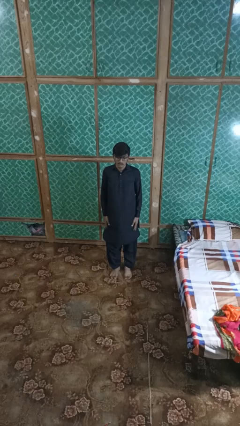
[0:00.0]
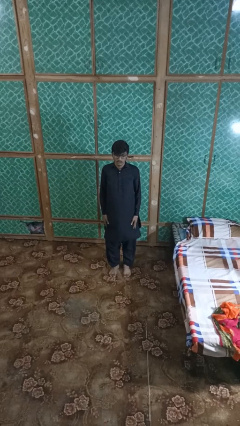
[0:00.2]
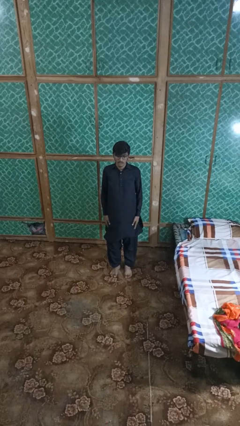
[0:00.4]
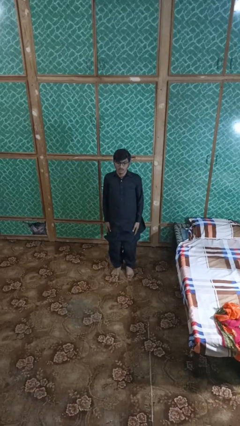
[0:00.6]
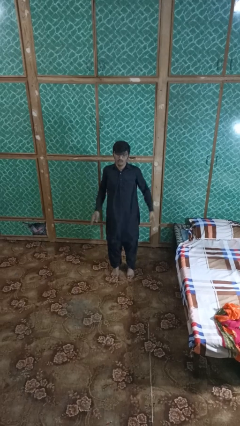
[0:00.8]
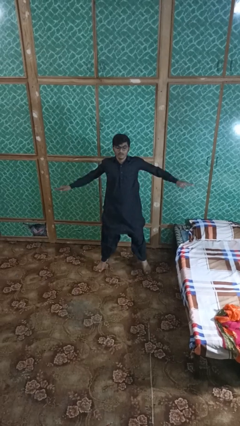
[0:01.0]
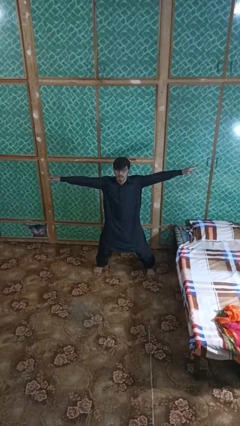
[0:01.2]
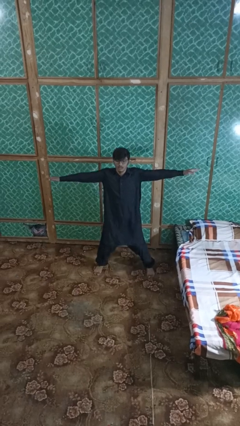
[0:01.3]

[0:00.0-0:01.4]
person exercises with jumping jacks

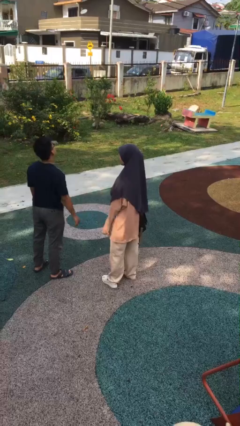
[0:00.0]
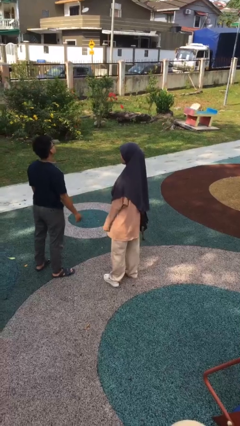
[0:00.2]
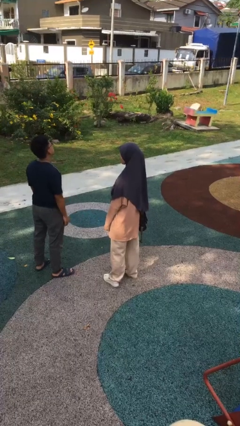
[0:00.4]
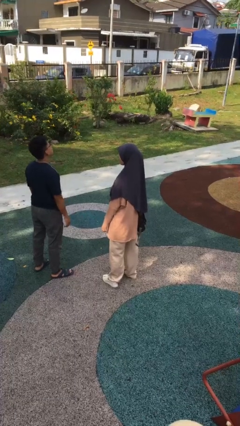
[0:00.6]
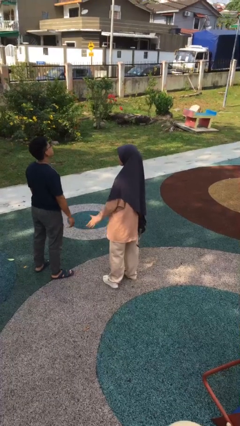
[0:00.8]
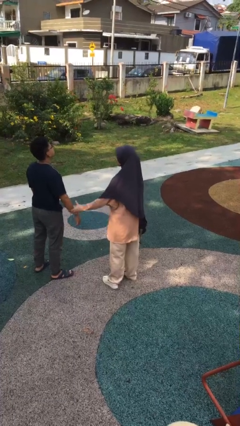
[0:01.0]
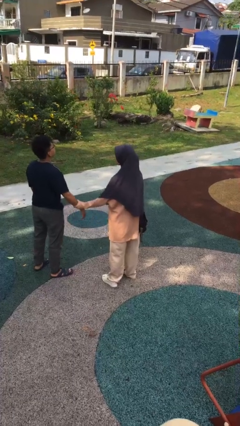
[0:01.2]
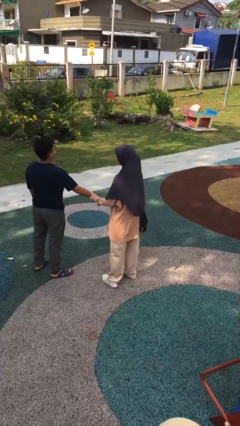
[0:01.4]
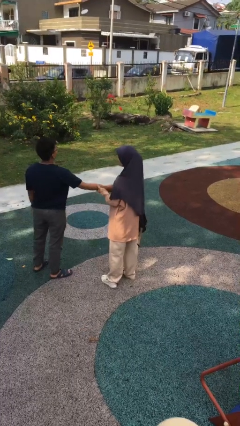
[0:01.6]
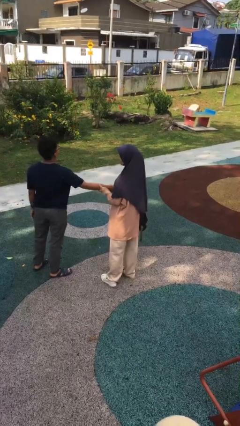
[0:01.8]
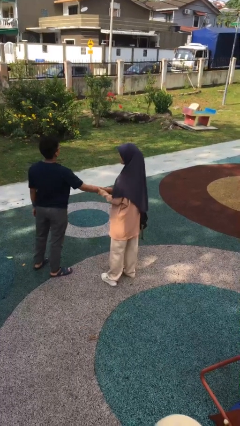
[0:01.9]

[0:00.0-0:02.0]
person grabs person by forearm

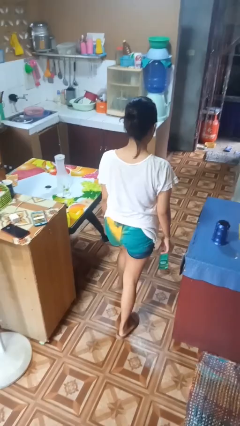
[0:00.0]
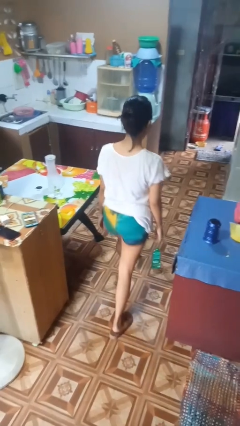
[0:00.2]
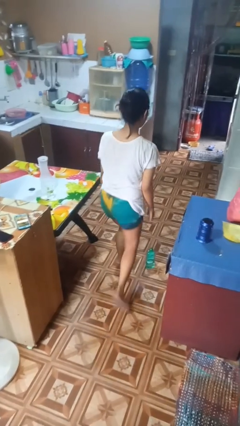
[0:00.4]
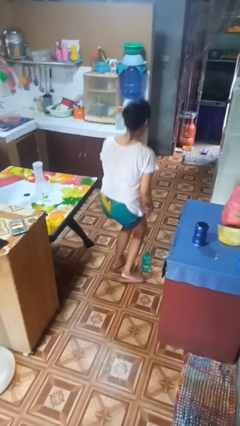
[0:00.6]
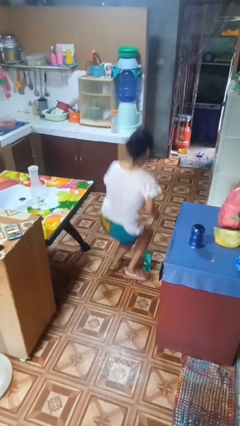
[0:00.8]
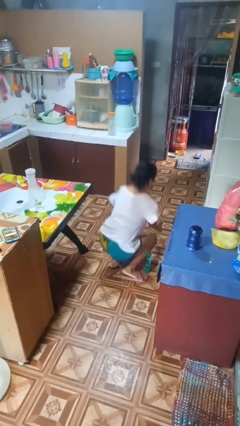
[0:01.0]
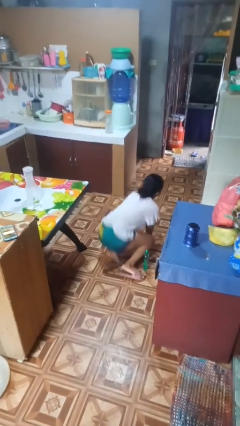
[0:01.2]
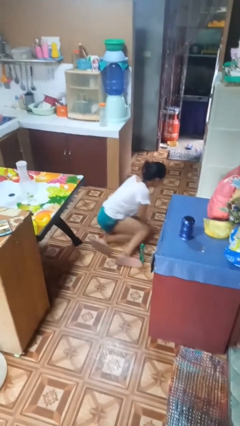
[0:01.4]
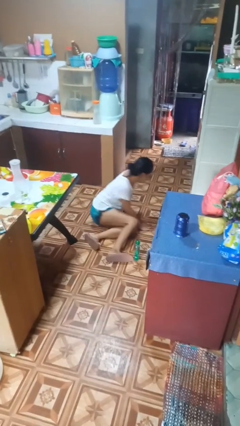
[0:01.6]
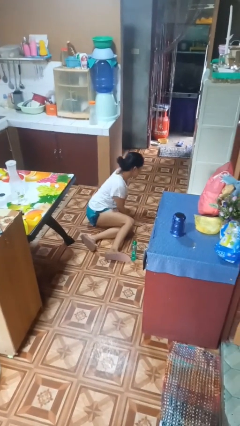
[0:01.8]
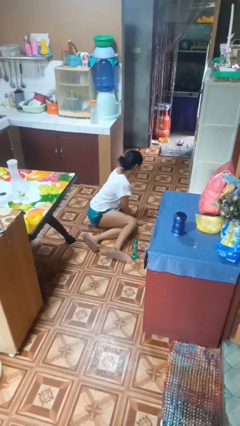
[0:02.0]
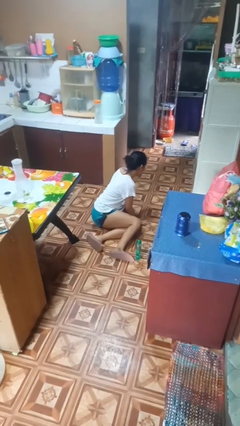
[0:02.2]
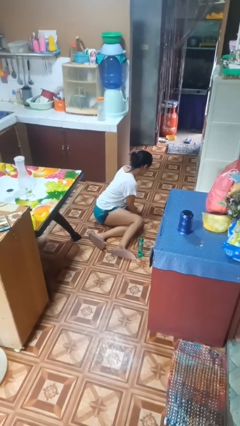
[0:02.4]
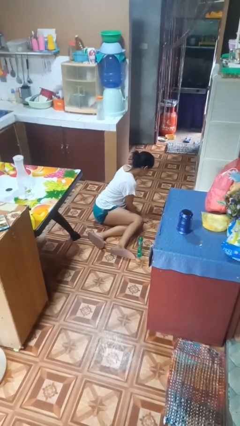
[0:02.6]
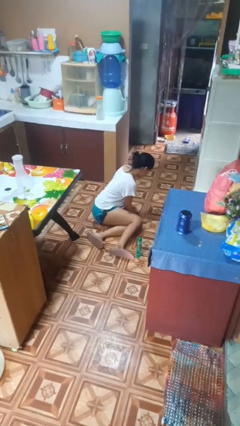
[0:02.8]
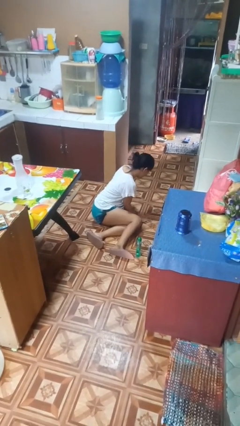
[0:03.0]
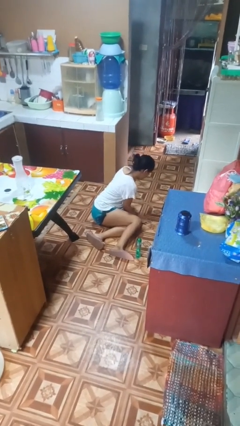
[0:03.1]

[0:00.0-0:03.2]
person trips on object on floor

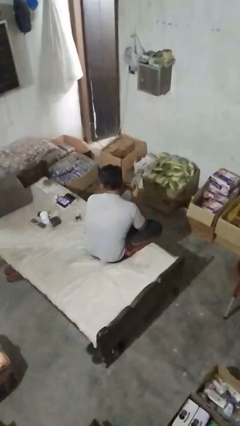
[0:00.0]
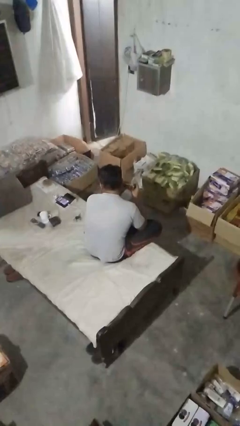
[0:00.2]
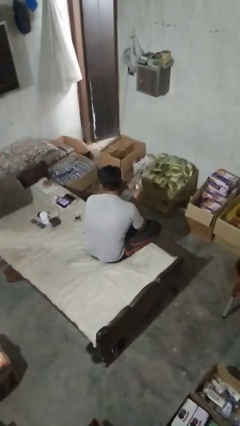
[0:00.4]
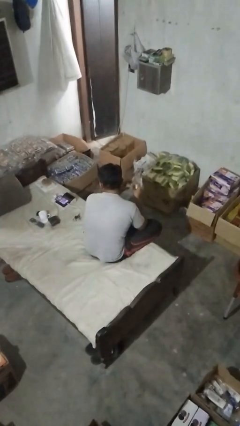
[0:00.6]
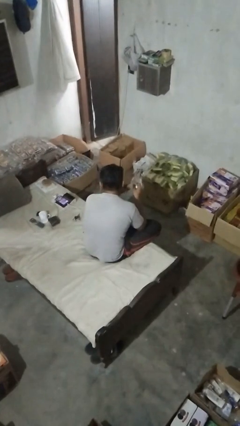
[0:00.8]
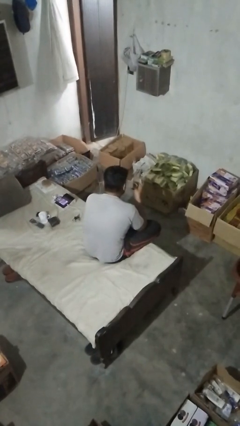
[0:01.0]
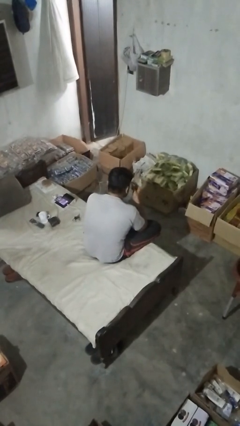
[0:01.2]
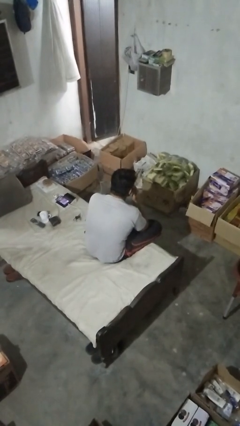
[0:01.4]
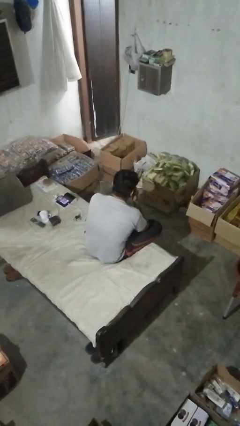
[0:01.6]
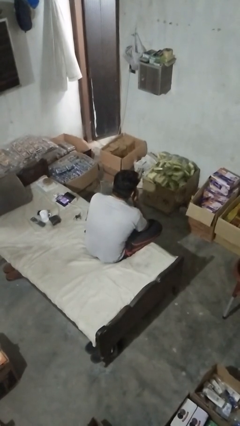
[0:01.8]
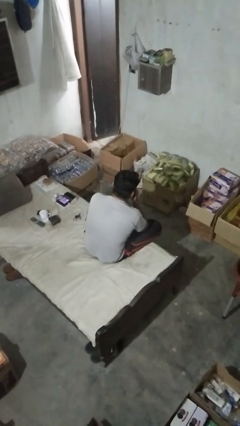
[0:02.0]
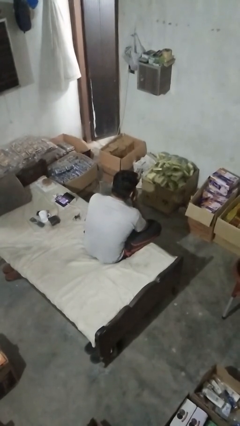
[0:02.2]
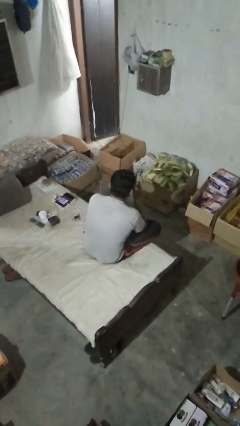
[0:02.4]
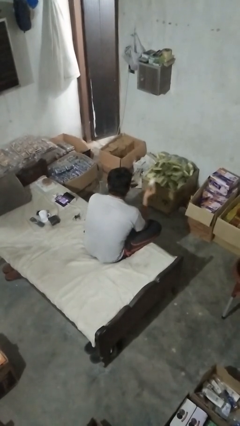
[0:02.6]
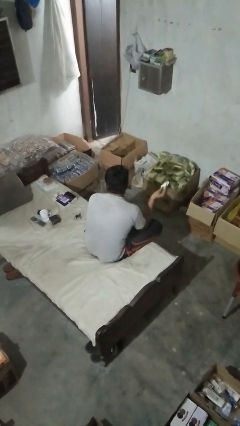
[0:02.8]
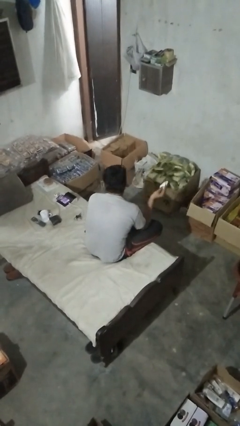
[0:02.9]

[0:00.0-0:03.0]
person blows nose

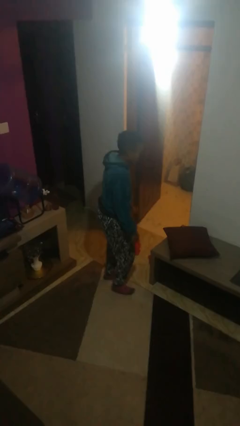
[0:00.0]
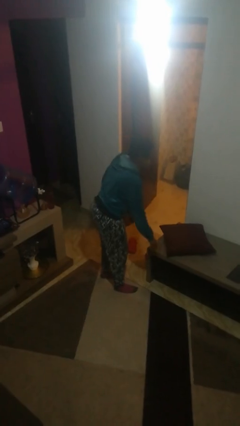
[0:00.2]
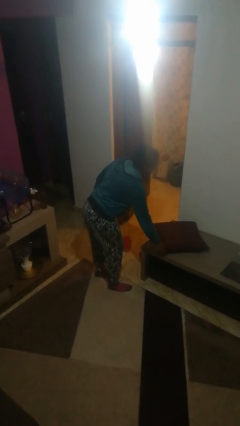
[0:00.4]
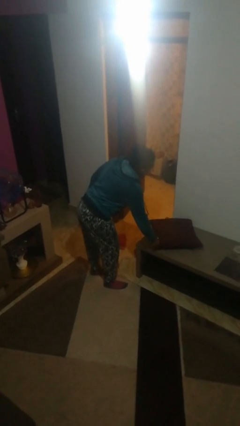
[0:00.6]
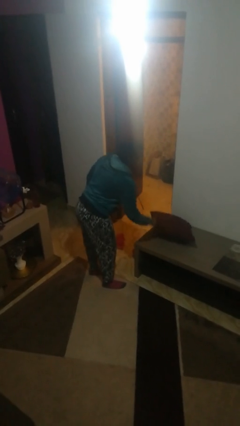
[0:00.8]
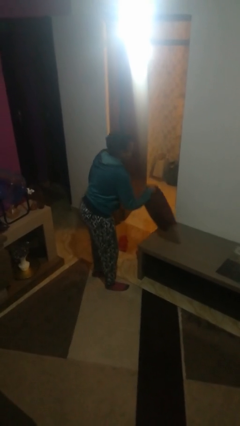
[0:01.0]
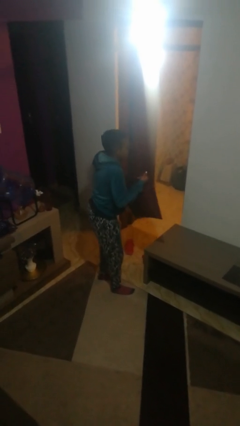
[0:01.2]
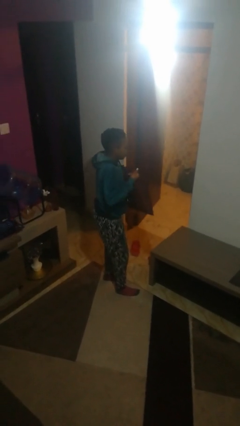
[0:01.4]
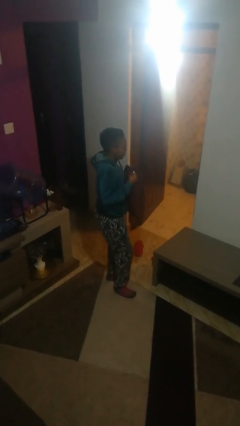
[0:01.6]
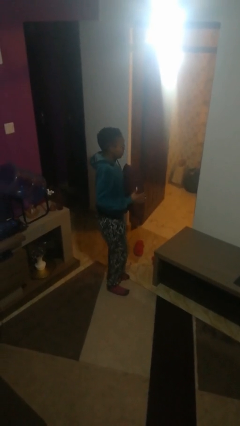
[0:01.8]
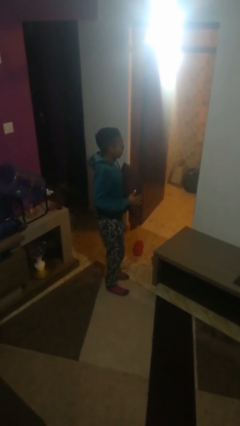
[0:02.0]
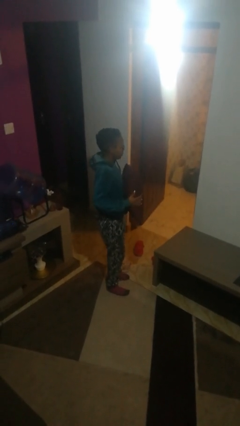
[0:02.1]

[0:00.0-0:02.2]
person picks up object from table

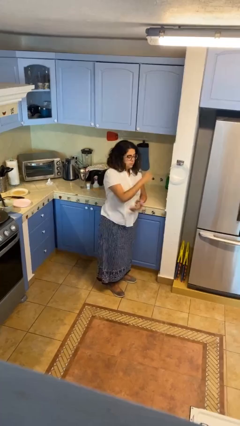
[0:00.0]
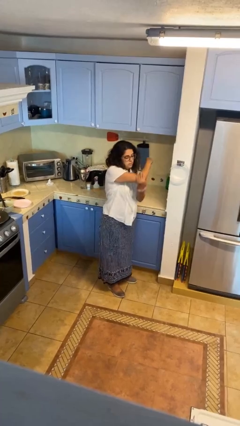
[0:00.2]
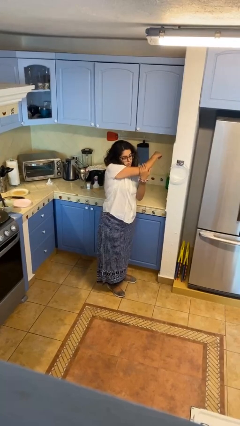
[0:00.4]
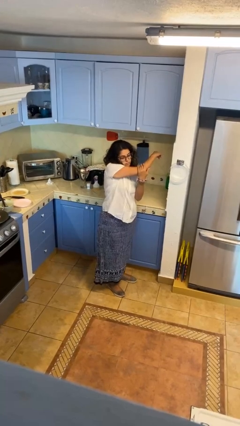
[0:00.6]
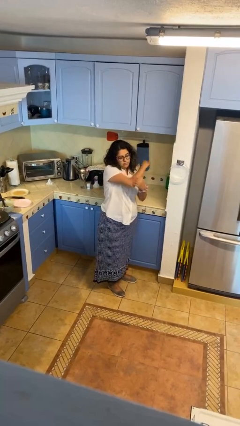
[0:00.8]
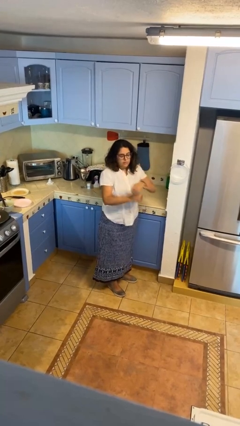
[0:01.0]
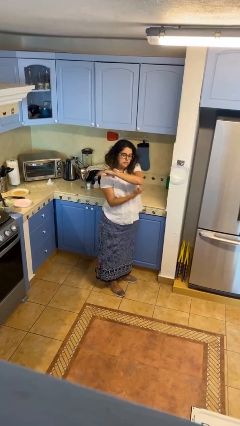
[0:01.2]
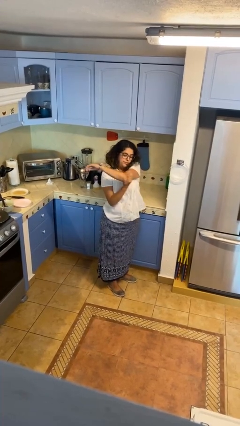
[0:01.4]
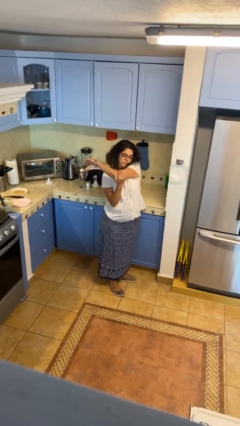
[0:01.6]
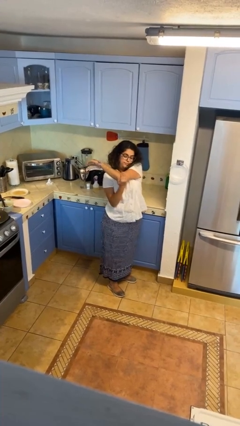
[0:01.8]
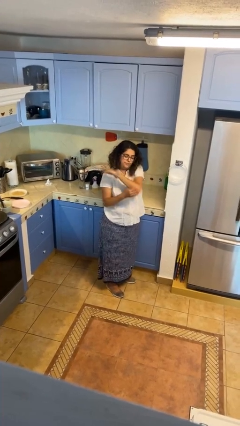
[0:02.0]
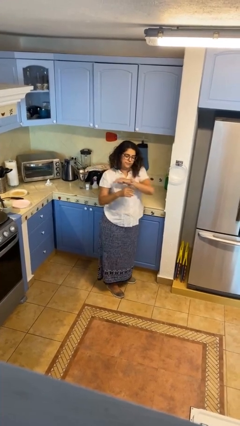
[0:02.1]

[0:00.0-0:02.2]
person stretches arms to side

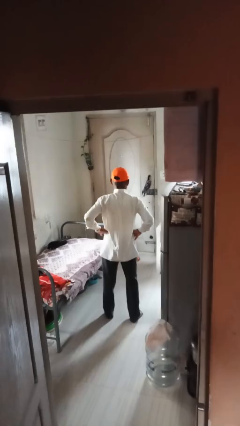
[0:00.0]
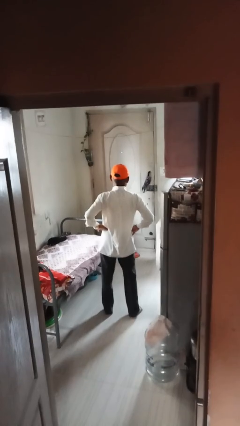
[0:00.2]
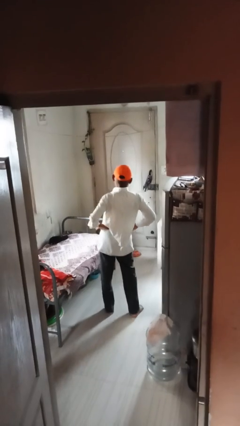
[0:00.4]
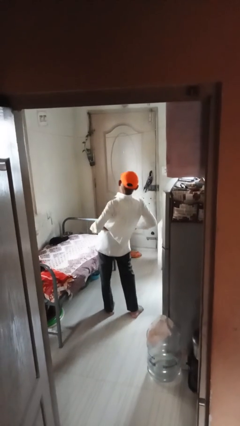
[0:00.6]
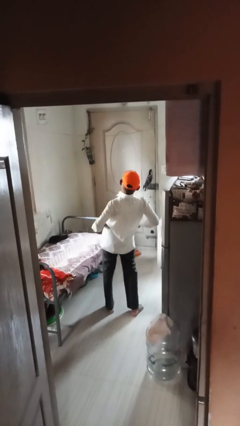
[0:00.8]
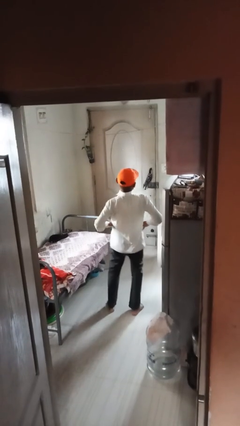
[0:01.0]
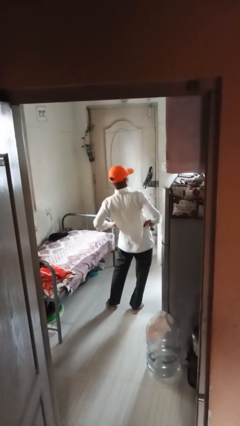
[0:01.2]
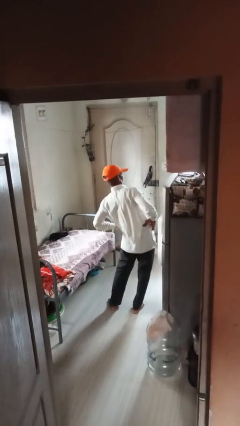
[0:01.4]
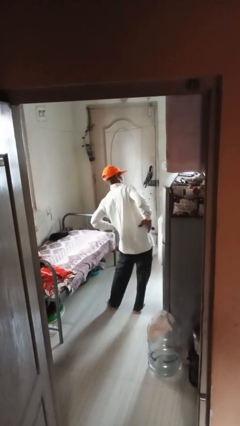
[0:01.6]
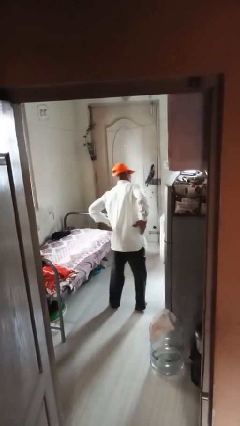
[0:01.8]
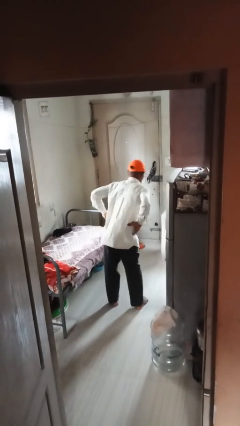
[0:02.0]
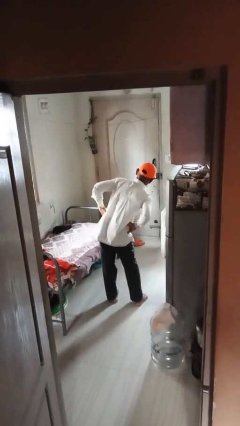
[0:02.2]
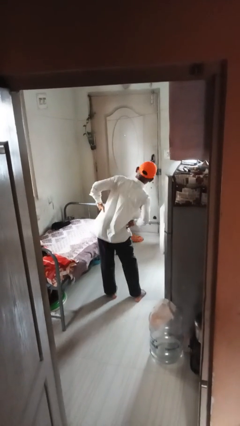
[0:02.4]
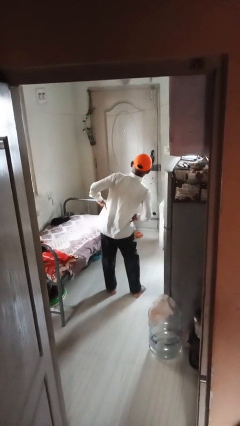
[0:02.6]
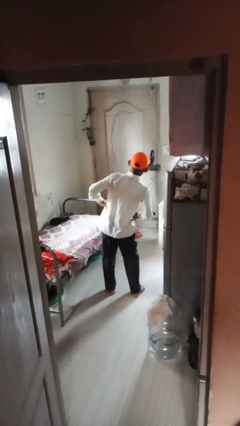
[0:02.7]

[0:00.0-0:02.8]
person wiggles hips

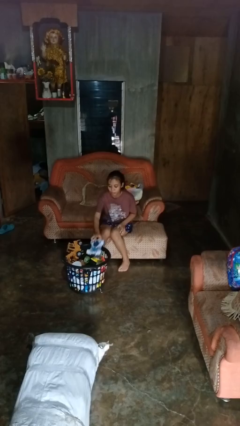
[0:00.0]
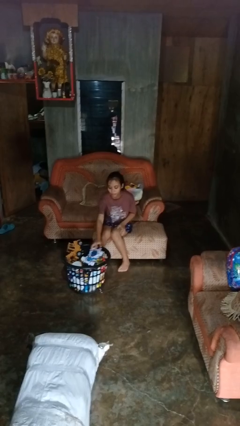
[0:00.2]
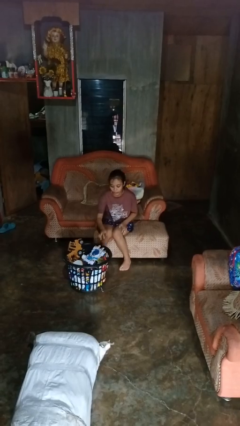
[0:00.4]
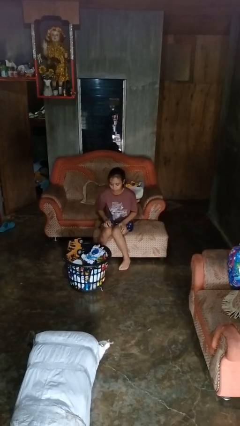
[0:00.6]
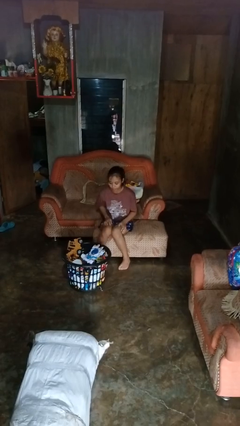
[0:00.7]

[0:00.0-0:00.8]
person puts object into basket
